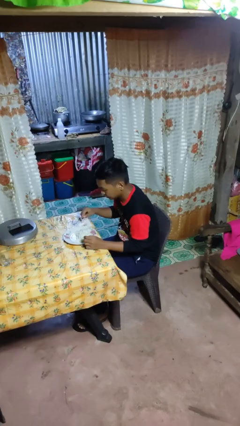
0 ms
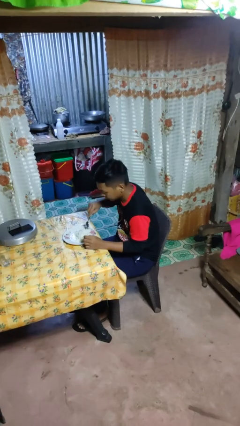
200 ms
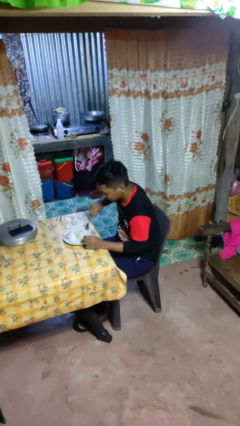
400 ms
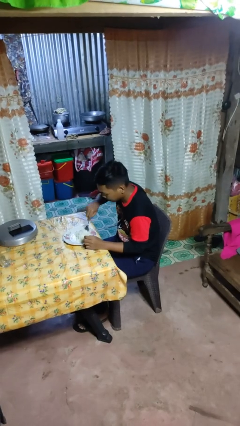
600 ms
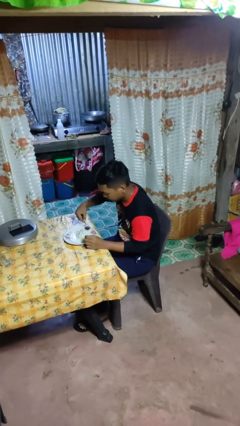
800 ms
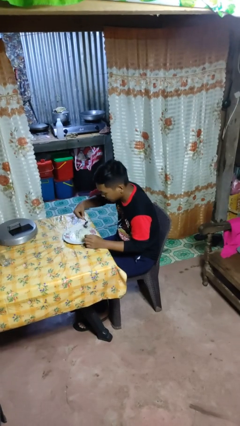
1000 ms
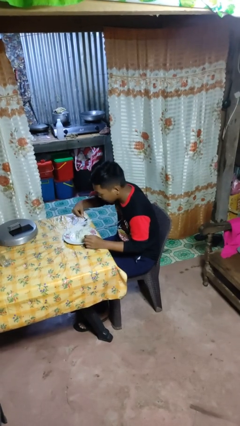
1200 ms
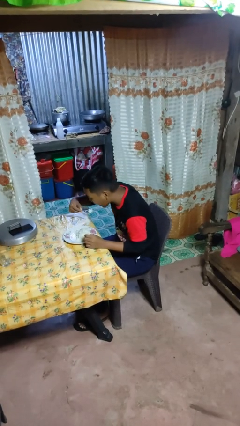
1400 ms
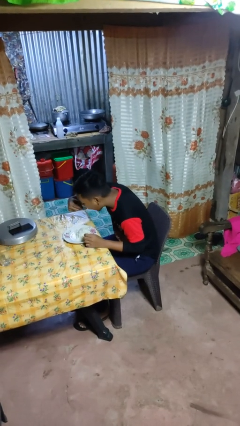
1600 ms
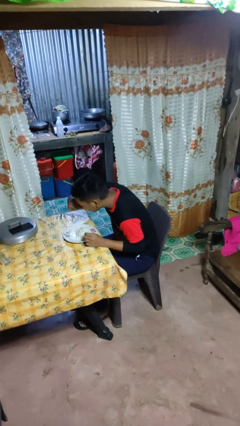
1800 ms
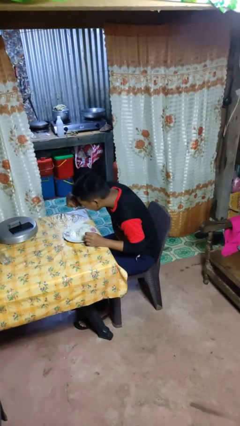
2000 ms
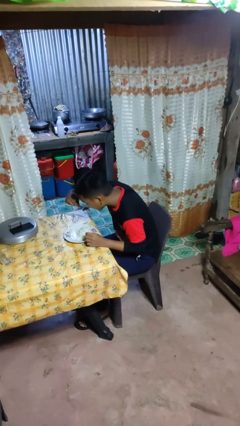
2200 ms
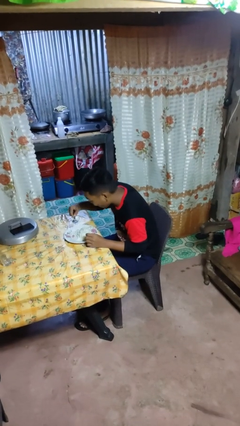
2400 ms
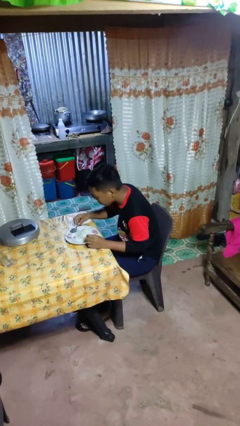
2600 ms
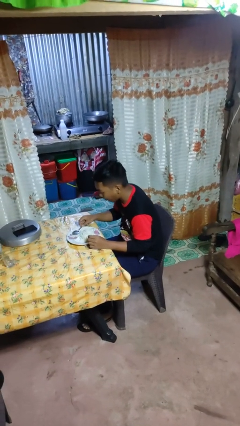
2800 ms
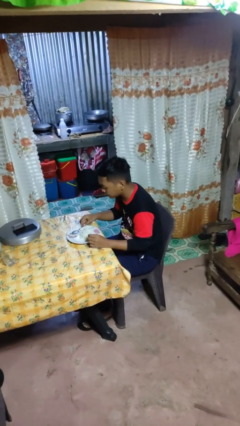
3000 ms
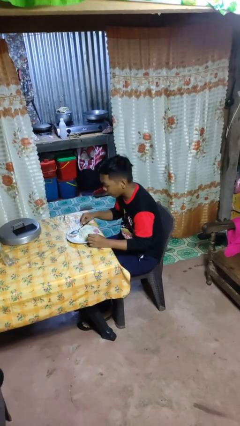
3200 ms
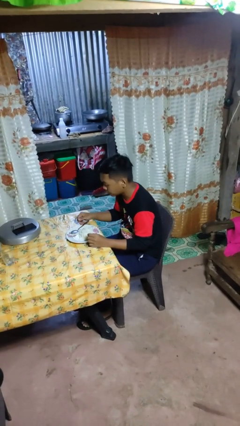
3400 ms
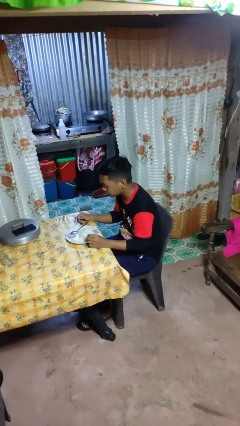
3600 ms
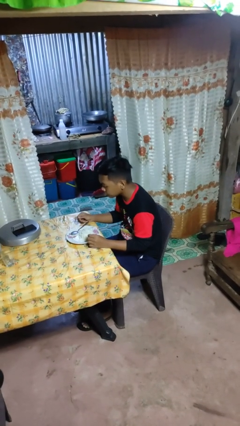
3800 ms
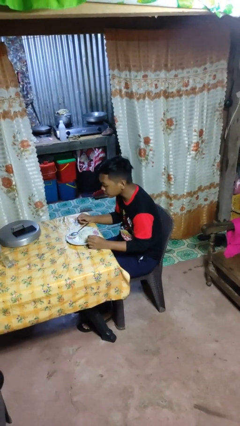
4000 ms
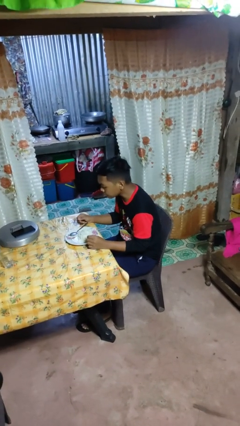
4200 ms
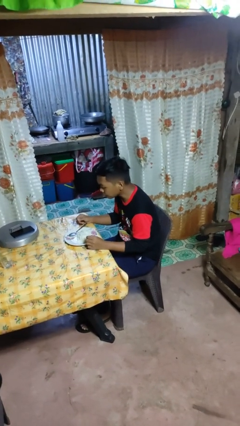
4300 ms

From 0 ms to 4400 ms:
person eats with utensil

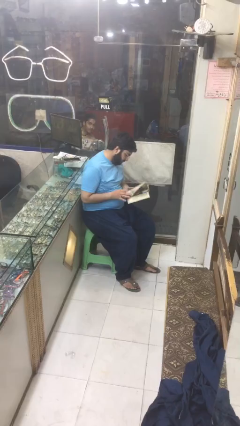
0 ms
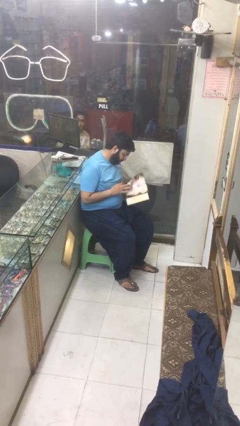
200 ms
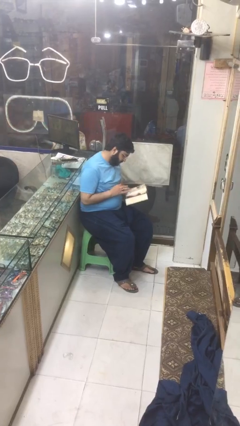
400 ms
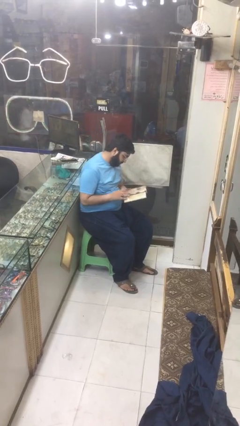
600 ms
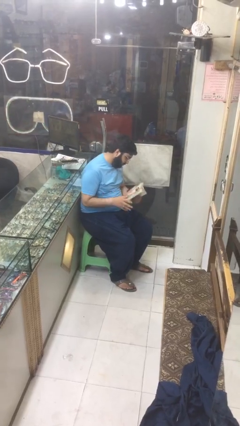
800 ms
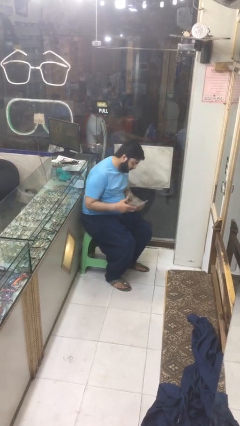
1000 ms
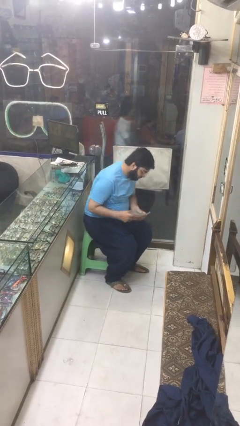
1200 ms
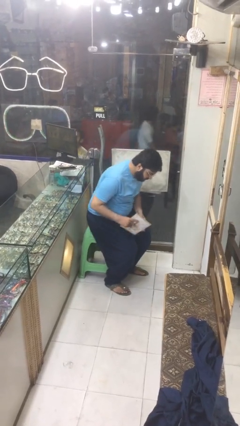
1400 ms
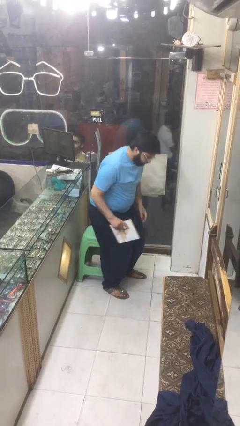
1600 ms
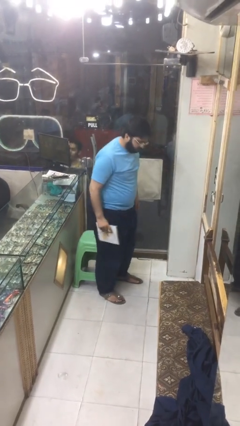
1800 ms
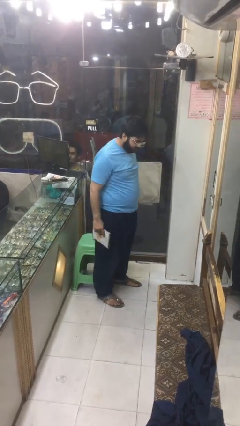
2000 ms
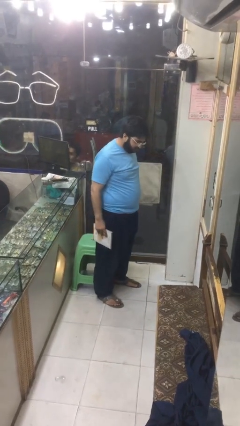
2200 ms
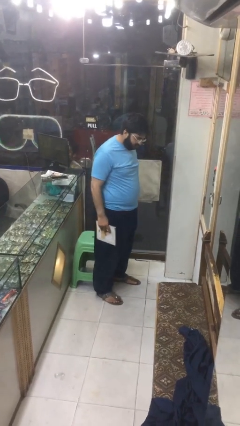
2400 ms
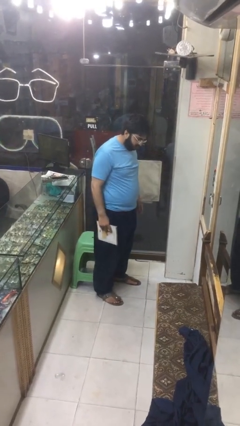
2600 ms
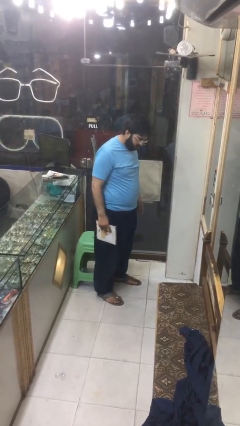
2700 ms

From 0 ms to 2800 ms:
person stands up

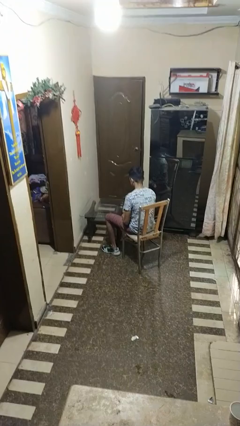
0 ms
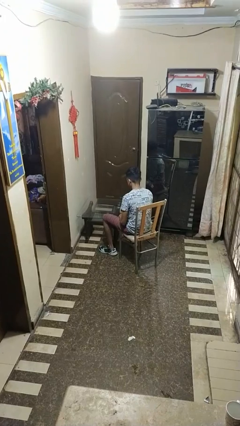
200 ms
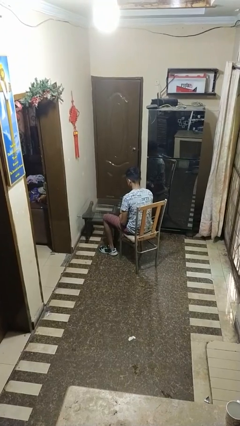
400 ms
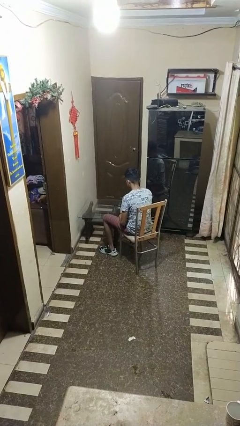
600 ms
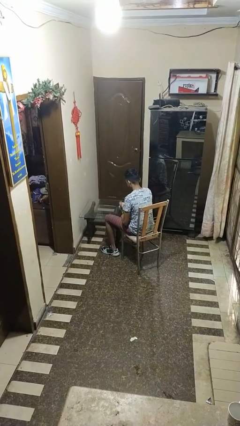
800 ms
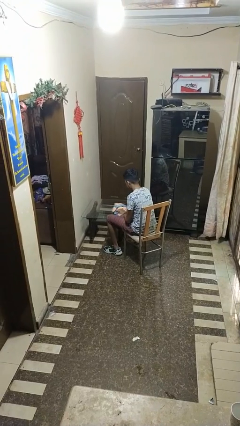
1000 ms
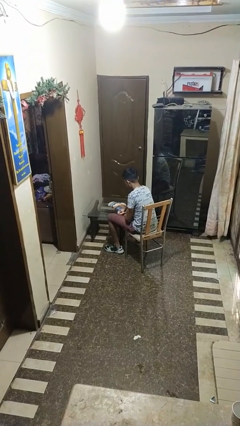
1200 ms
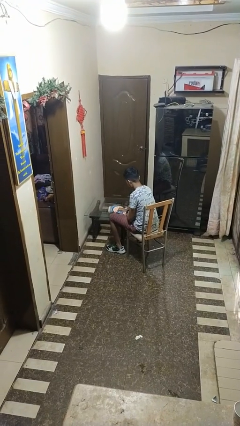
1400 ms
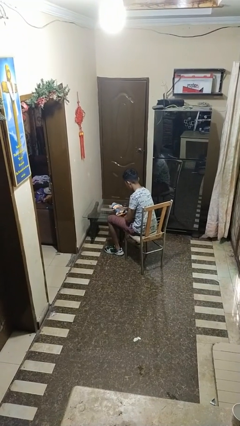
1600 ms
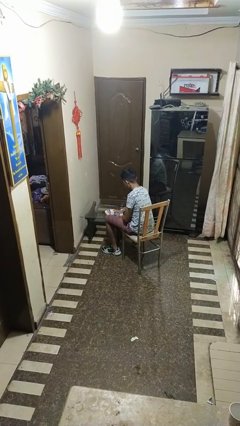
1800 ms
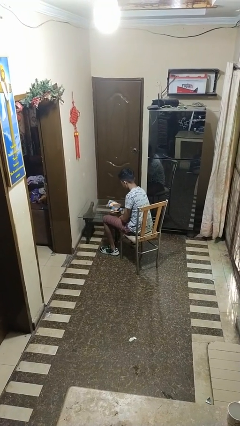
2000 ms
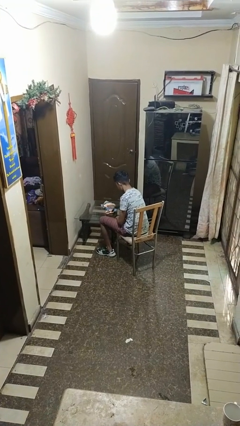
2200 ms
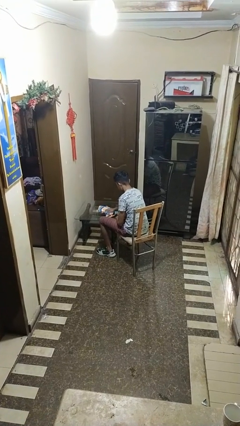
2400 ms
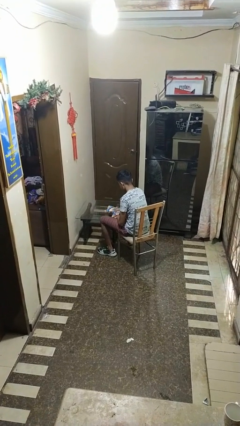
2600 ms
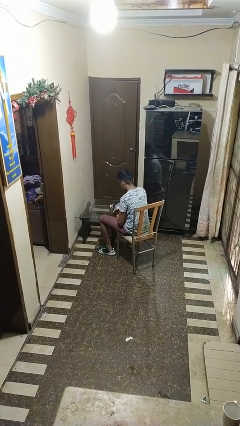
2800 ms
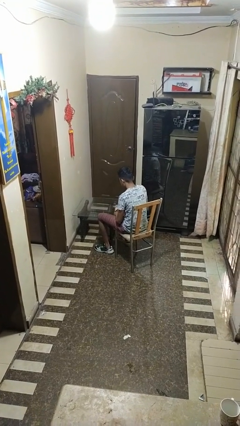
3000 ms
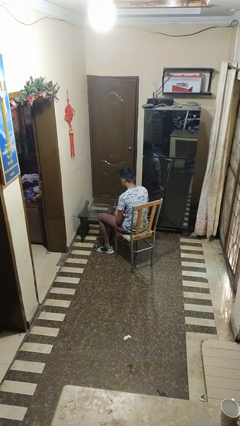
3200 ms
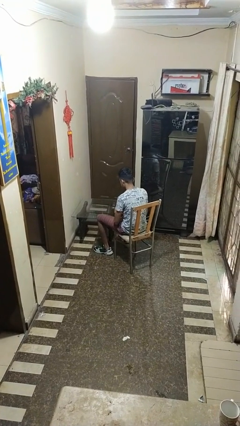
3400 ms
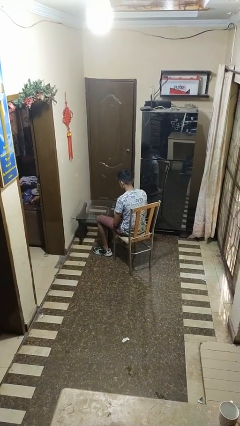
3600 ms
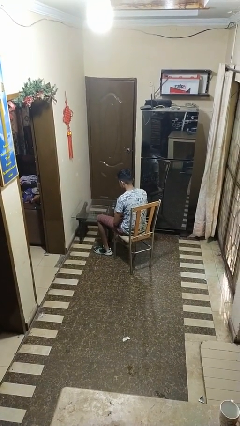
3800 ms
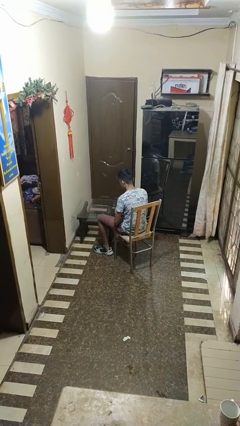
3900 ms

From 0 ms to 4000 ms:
person cleans table with rag

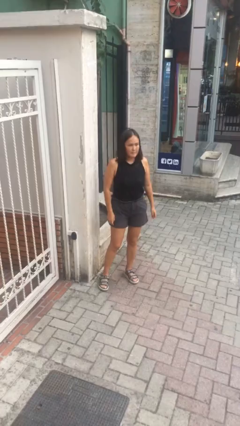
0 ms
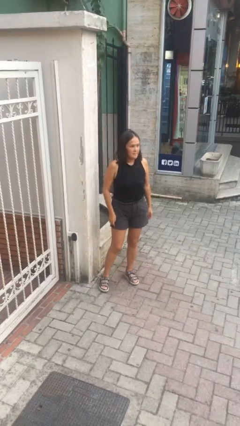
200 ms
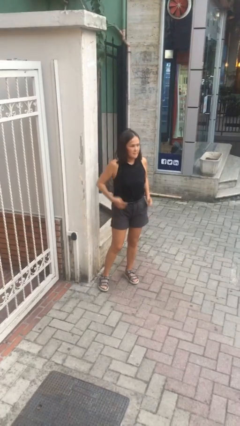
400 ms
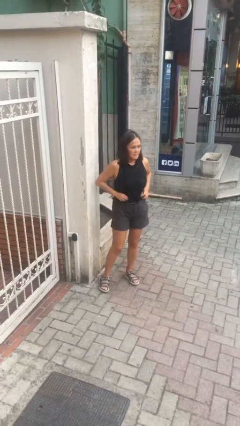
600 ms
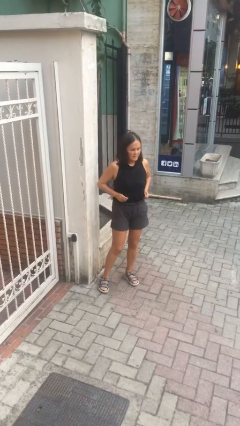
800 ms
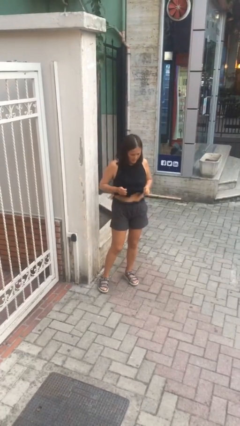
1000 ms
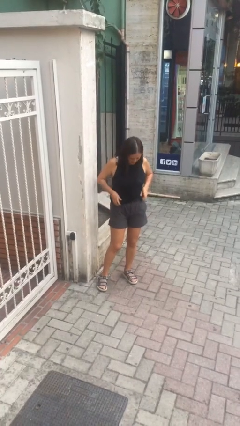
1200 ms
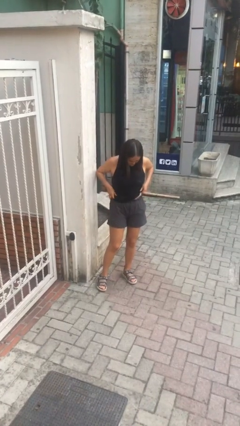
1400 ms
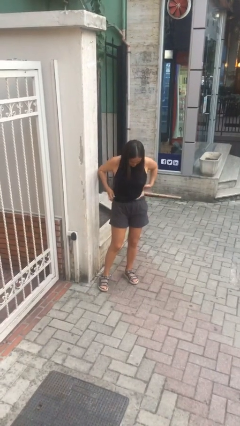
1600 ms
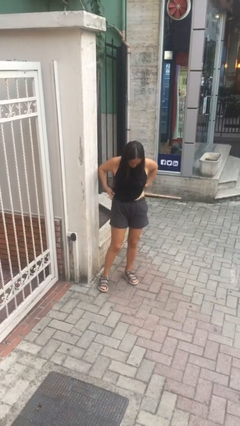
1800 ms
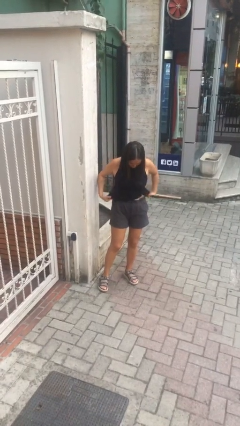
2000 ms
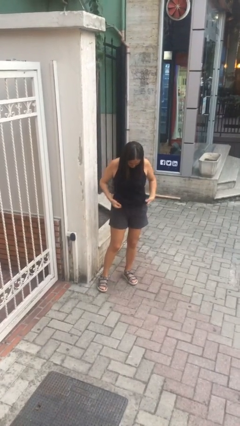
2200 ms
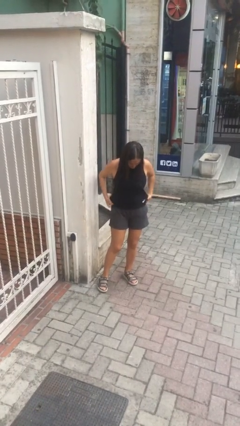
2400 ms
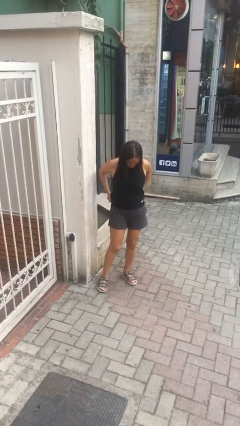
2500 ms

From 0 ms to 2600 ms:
person untucks shirt

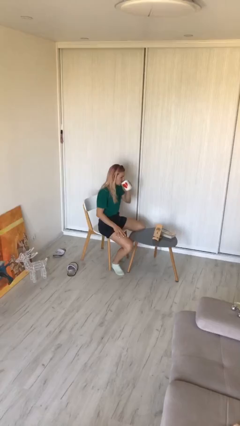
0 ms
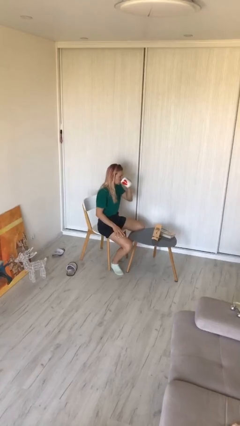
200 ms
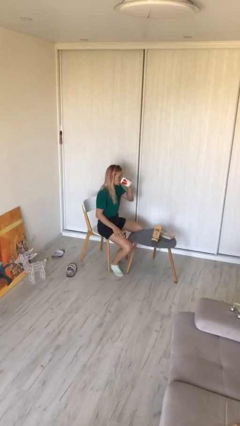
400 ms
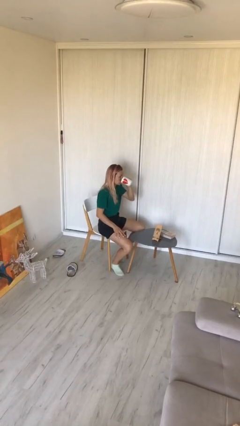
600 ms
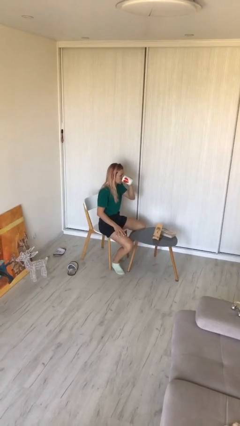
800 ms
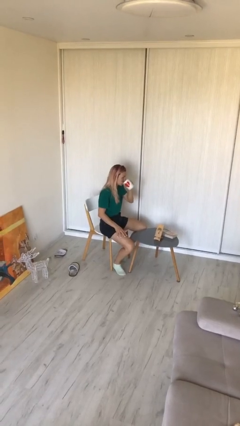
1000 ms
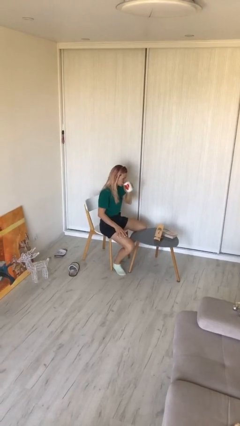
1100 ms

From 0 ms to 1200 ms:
person drinks from mug

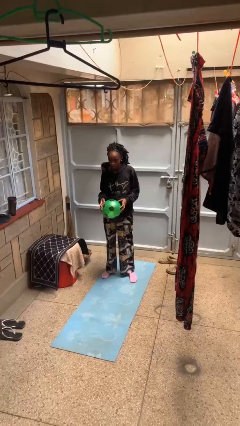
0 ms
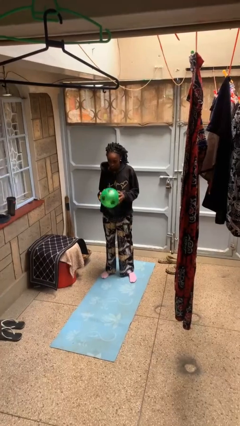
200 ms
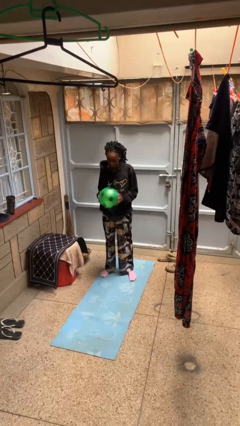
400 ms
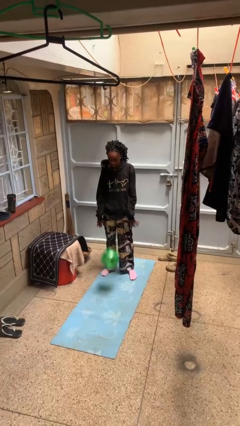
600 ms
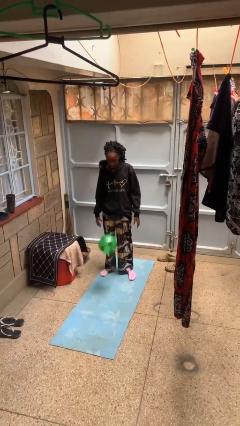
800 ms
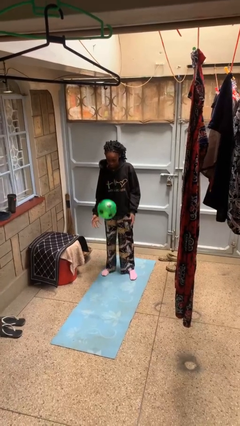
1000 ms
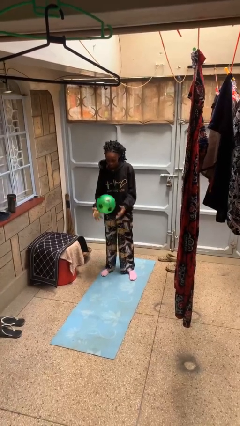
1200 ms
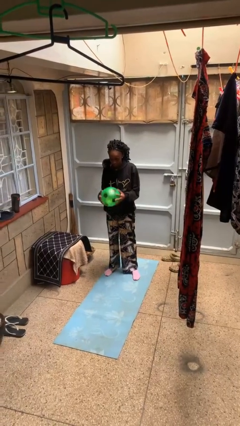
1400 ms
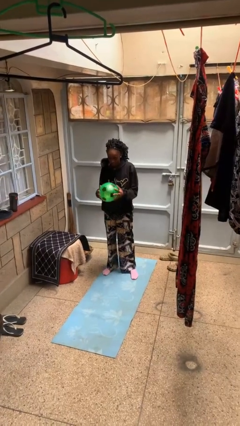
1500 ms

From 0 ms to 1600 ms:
person bounces ball on floor

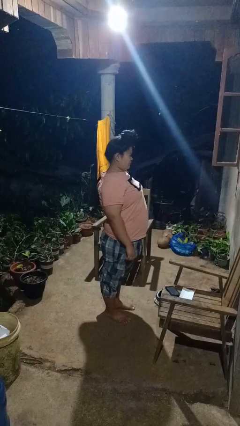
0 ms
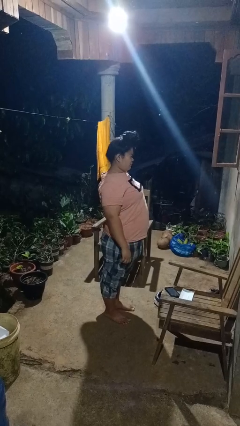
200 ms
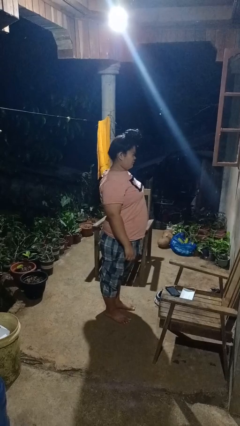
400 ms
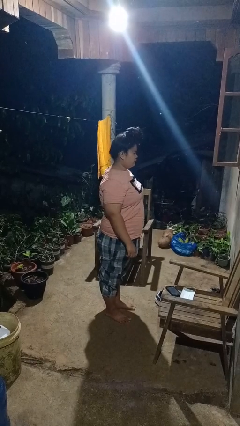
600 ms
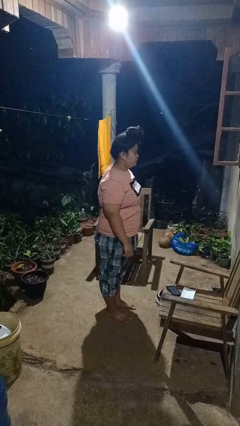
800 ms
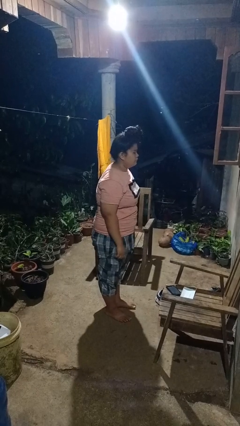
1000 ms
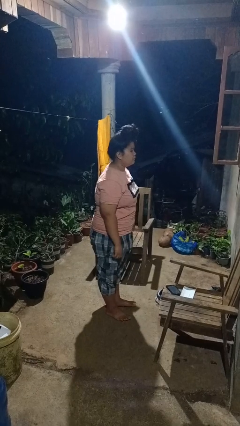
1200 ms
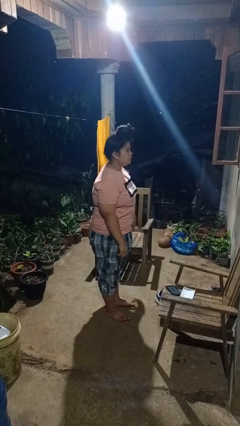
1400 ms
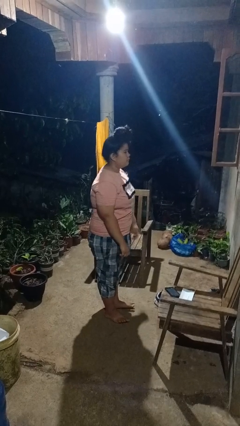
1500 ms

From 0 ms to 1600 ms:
person stretches back
